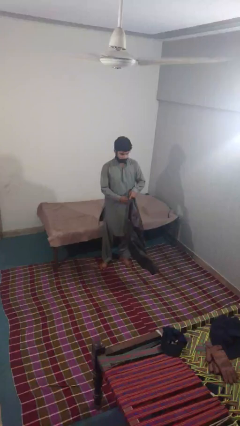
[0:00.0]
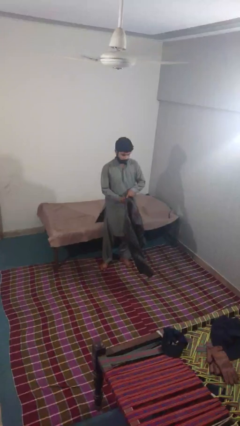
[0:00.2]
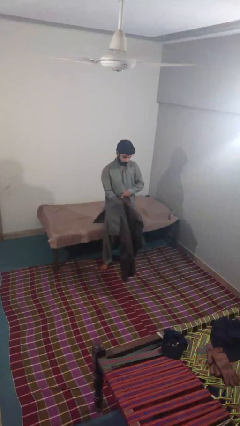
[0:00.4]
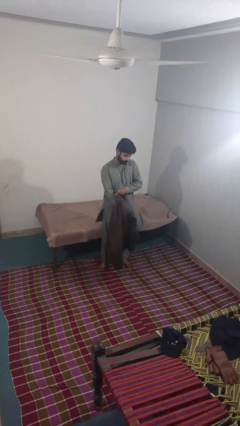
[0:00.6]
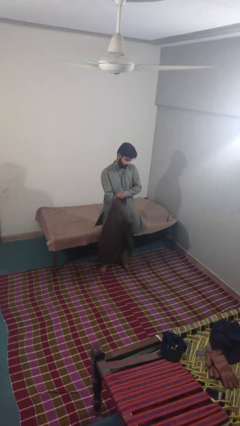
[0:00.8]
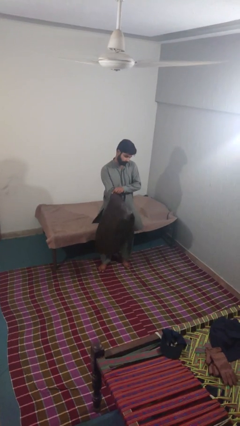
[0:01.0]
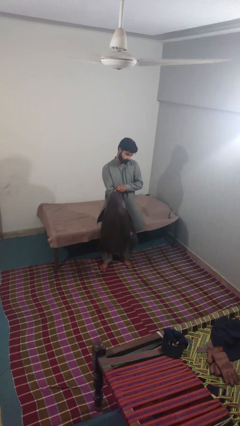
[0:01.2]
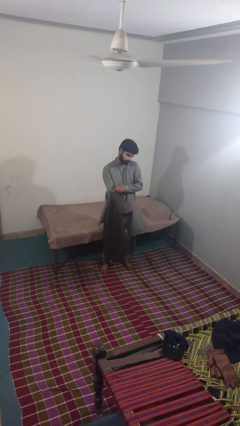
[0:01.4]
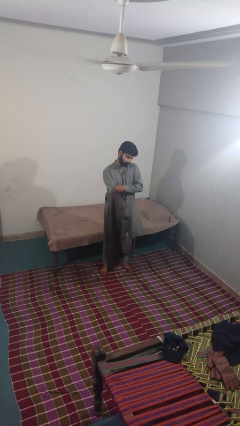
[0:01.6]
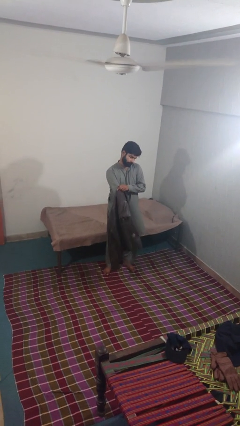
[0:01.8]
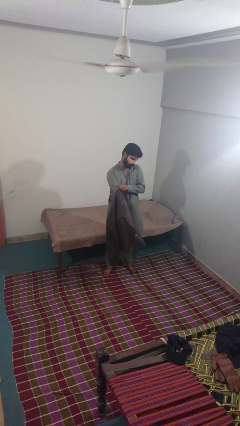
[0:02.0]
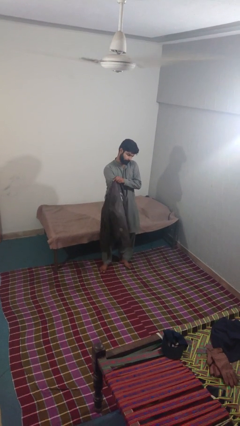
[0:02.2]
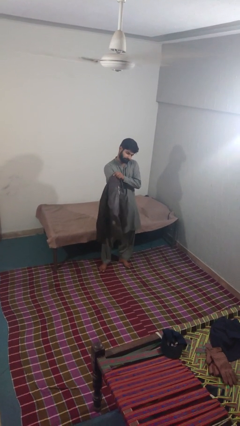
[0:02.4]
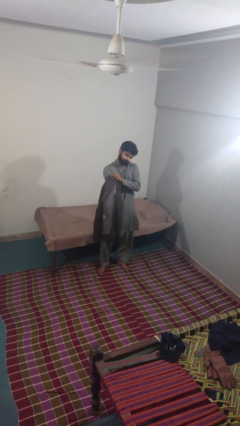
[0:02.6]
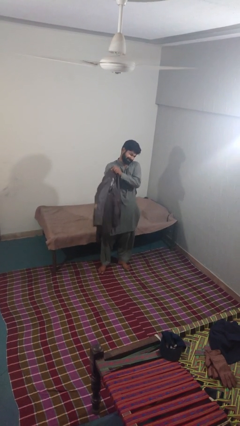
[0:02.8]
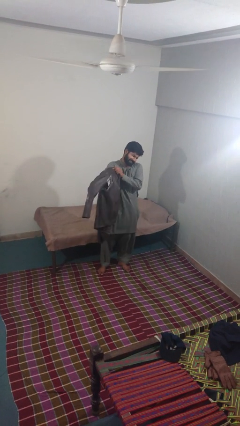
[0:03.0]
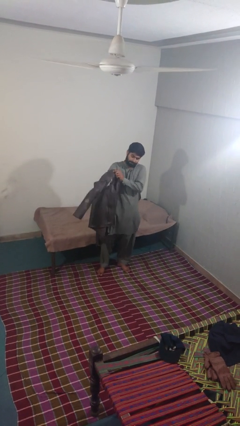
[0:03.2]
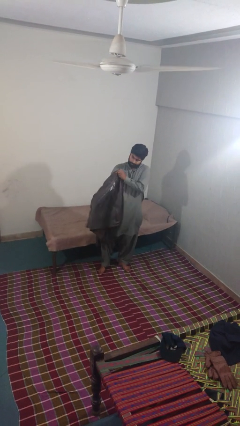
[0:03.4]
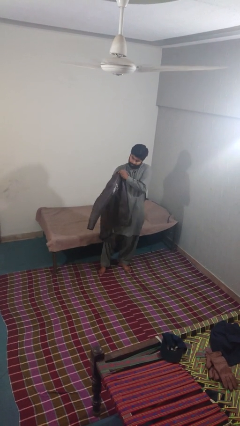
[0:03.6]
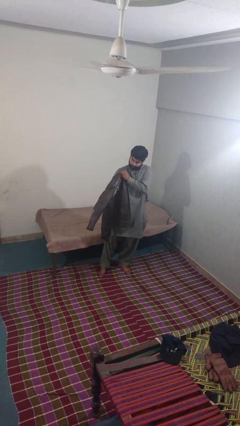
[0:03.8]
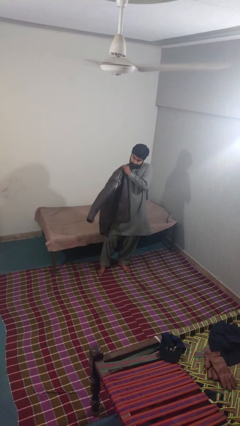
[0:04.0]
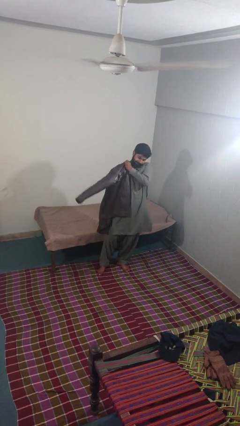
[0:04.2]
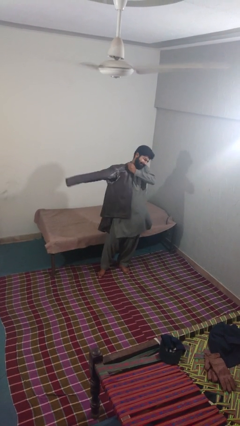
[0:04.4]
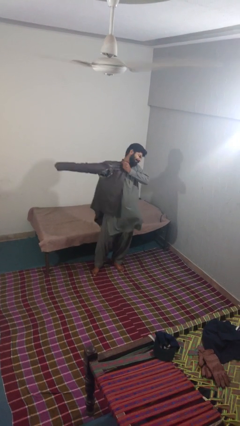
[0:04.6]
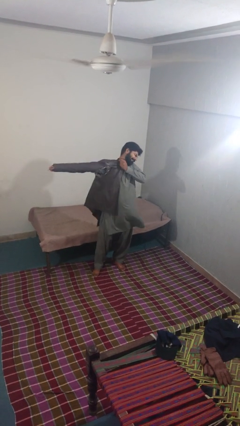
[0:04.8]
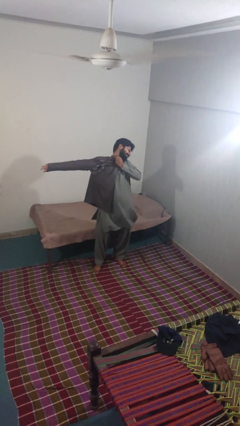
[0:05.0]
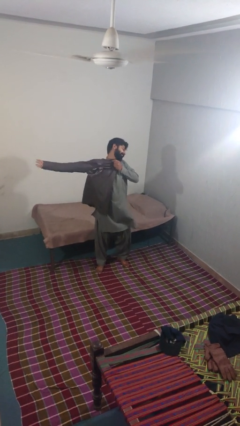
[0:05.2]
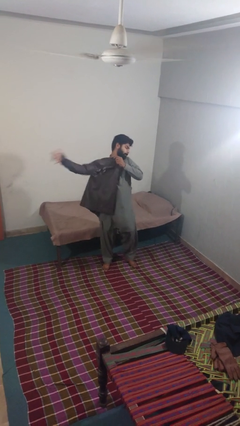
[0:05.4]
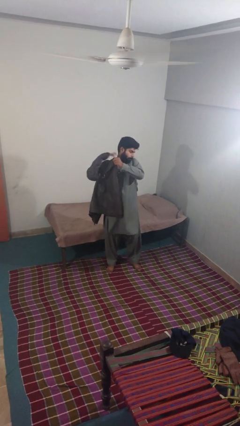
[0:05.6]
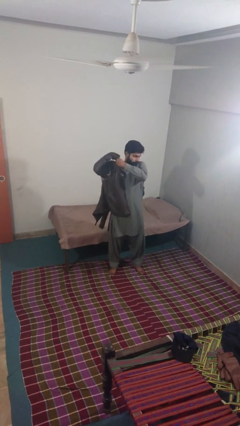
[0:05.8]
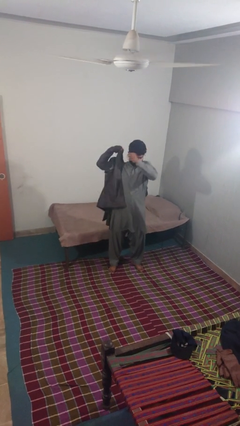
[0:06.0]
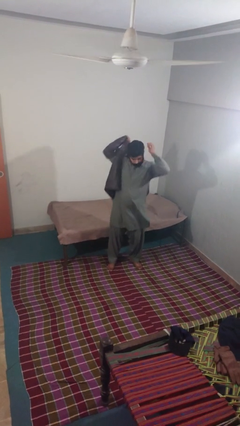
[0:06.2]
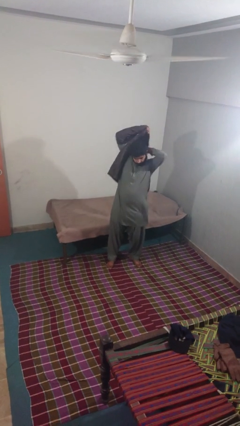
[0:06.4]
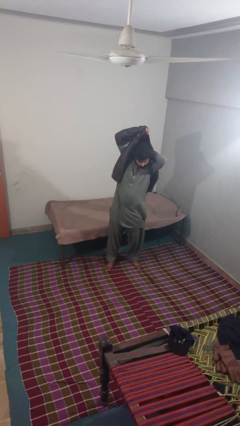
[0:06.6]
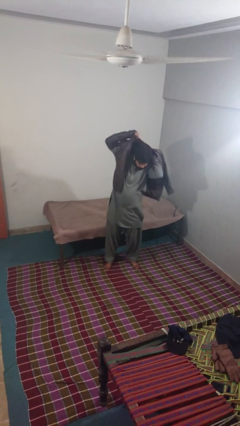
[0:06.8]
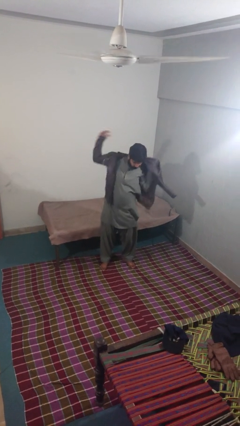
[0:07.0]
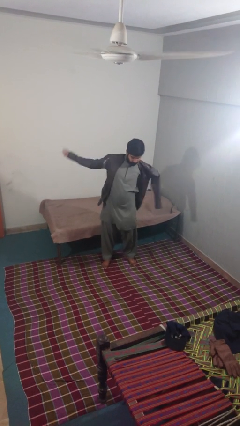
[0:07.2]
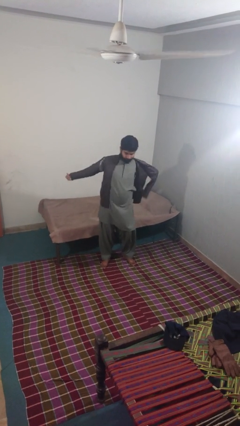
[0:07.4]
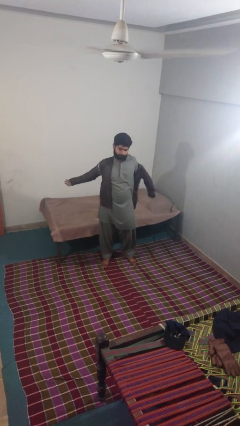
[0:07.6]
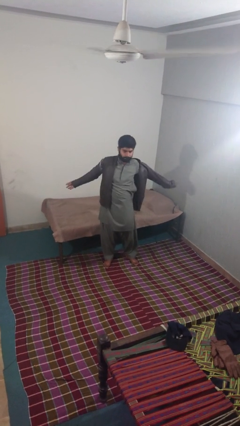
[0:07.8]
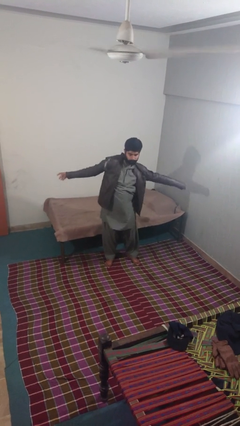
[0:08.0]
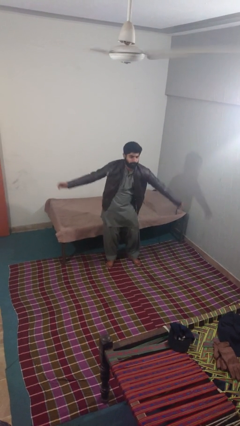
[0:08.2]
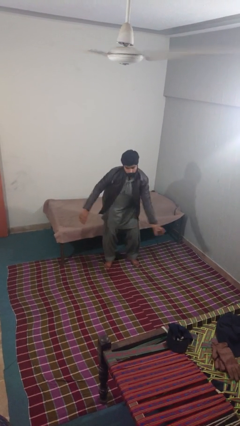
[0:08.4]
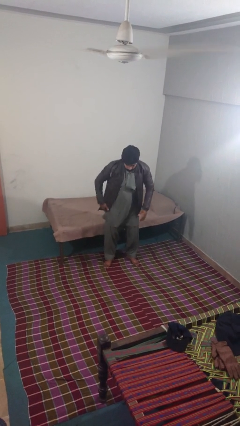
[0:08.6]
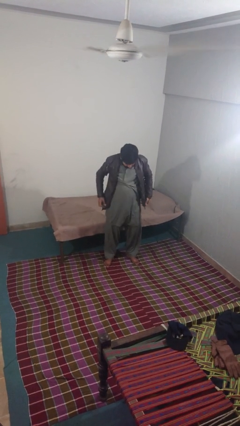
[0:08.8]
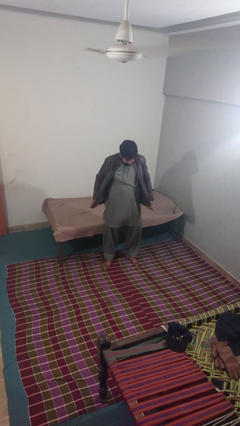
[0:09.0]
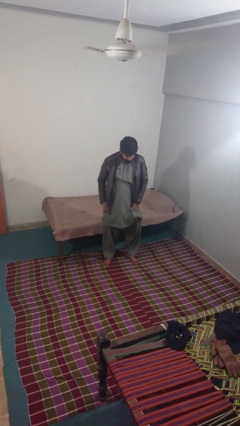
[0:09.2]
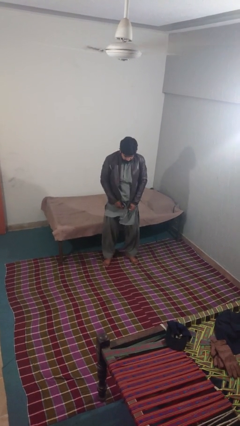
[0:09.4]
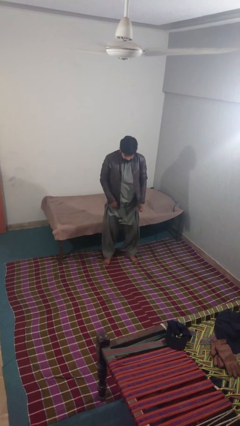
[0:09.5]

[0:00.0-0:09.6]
person puts on jacket

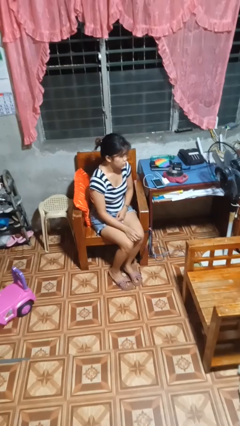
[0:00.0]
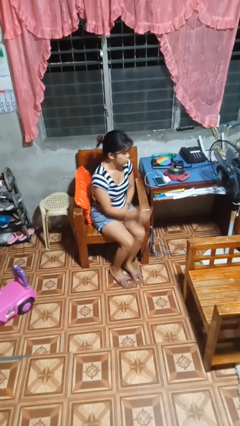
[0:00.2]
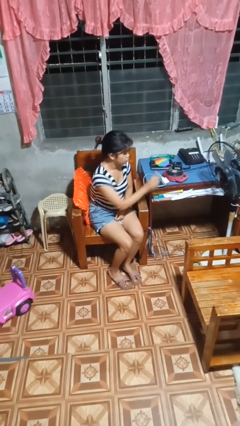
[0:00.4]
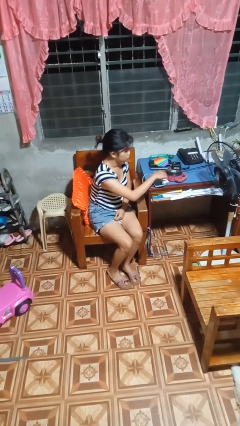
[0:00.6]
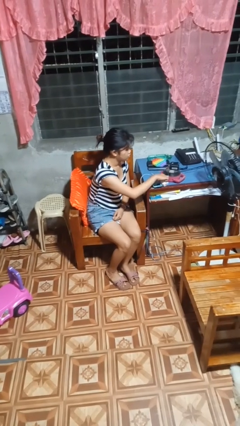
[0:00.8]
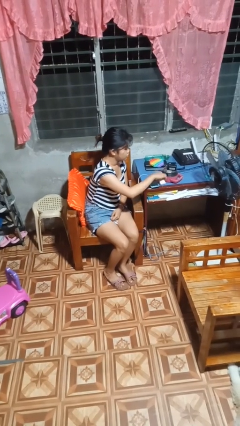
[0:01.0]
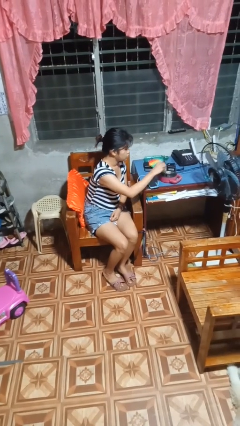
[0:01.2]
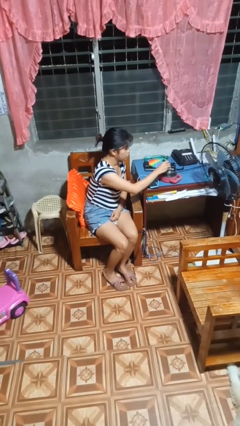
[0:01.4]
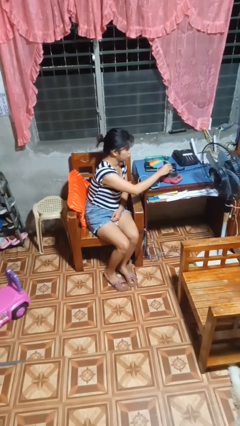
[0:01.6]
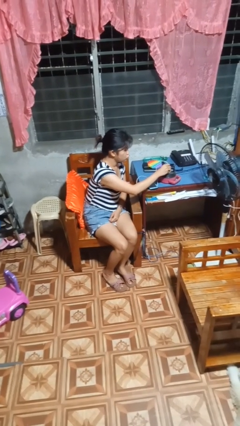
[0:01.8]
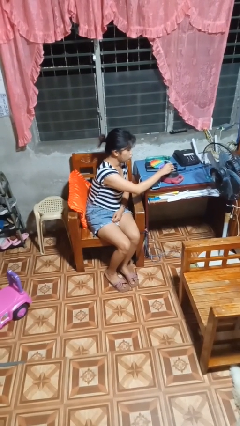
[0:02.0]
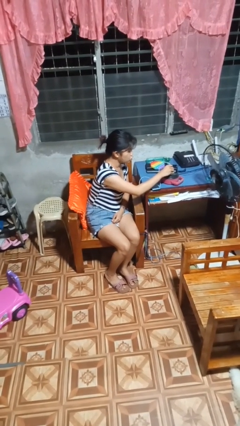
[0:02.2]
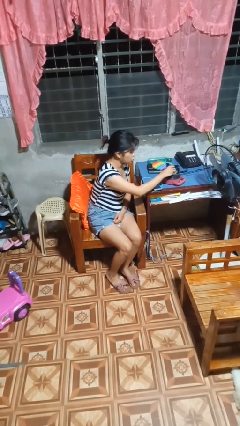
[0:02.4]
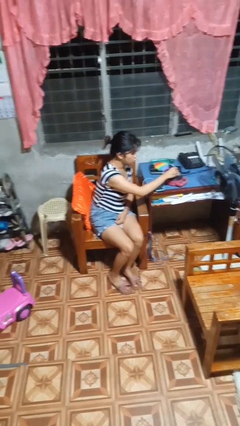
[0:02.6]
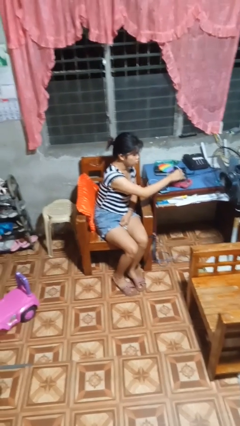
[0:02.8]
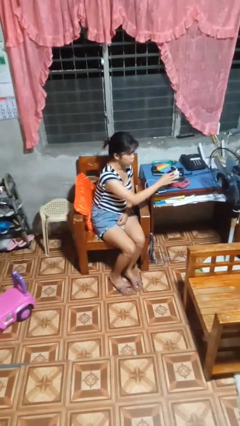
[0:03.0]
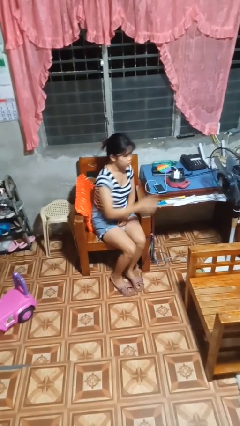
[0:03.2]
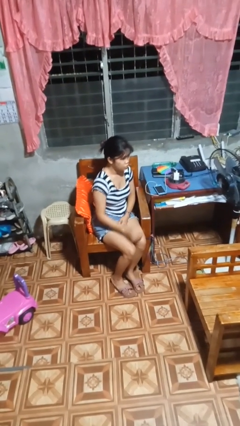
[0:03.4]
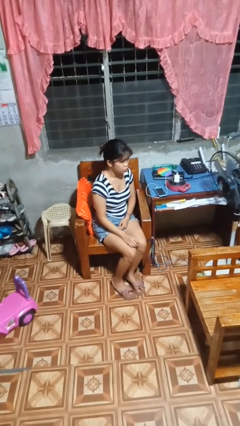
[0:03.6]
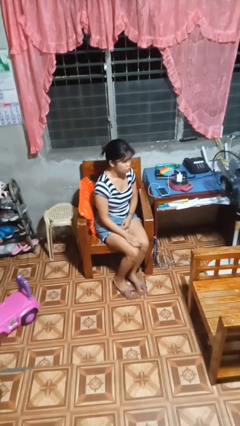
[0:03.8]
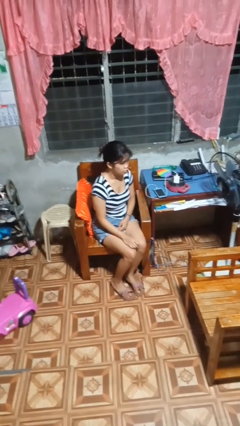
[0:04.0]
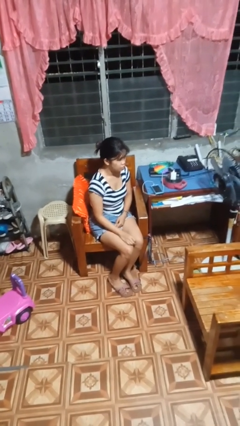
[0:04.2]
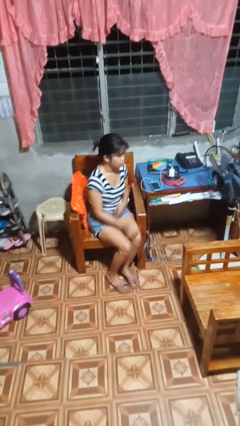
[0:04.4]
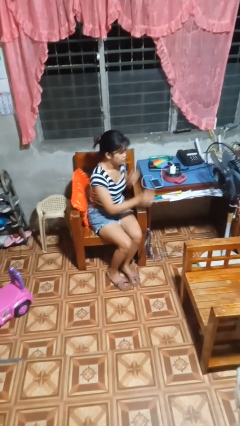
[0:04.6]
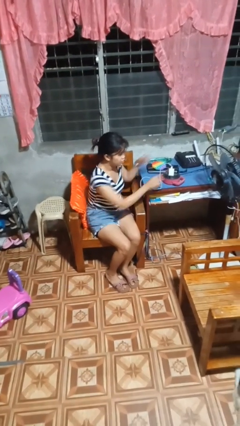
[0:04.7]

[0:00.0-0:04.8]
person plugs into electrical socket

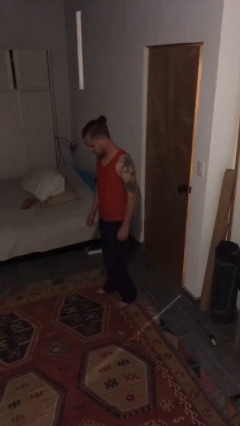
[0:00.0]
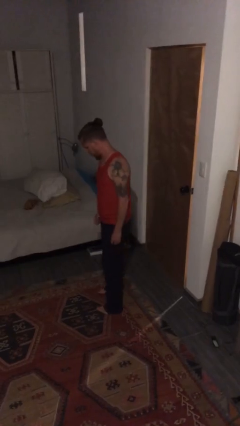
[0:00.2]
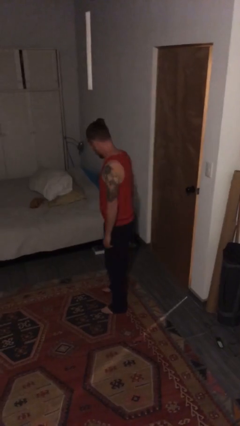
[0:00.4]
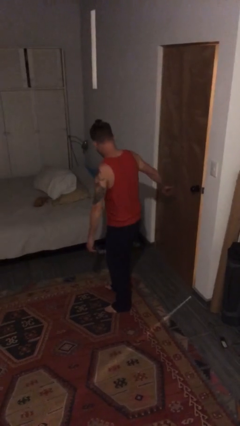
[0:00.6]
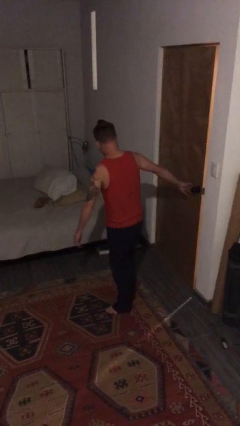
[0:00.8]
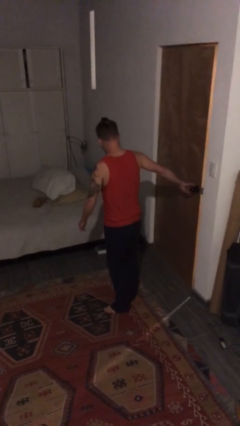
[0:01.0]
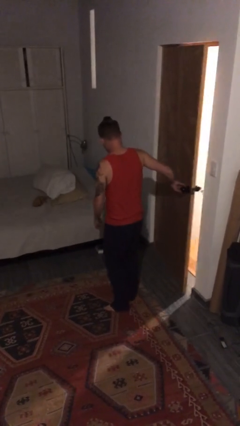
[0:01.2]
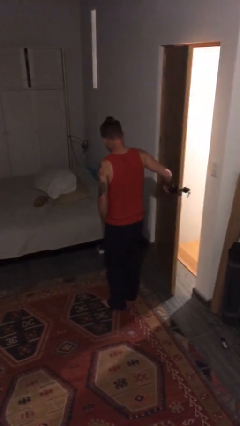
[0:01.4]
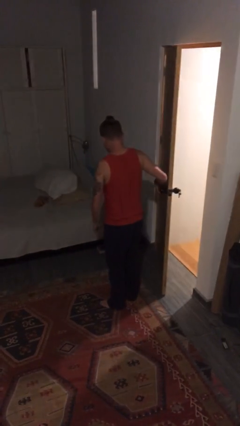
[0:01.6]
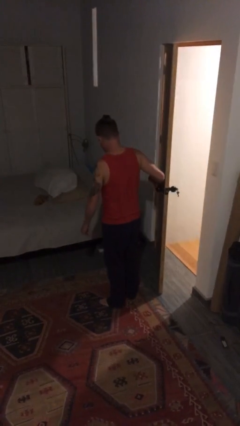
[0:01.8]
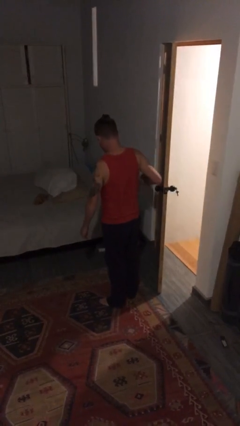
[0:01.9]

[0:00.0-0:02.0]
person opens facility door

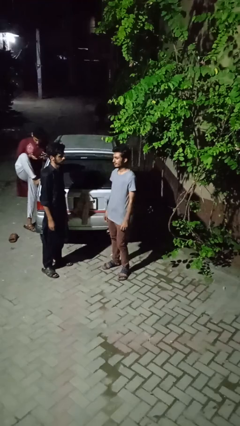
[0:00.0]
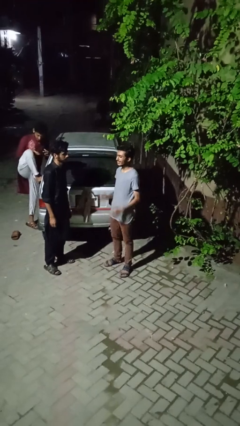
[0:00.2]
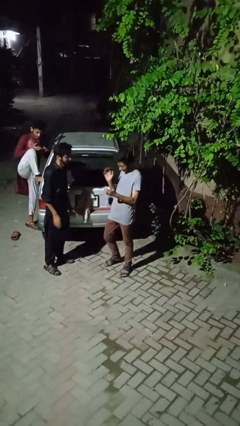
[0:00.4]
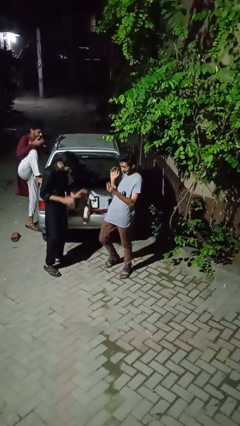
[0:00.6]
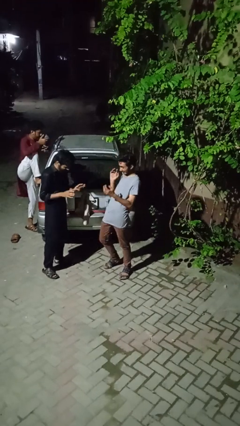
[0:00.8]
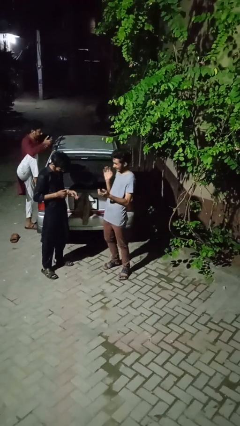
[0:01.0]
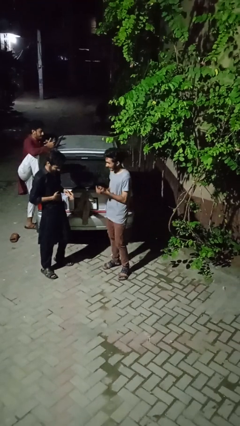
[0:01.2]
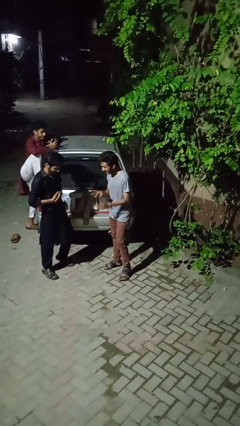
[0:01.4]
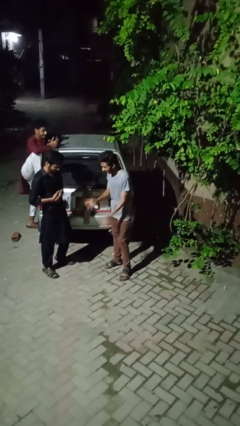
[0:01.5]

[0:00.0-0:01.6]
person laughs with person
